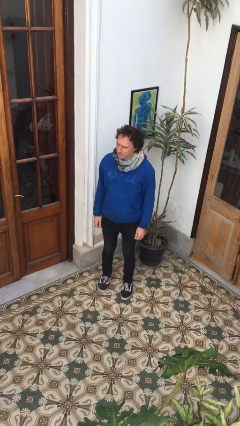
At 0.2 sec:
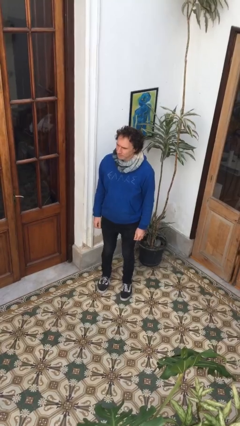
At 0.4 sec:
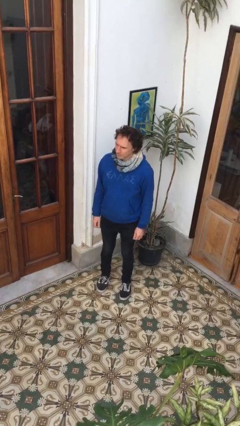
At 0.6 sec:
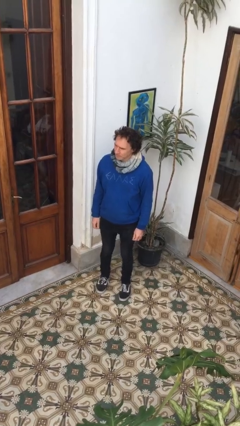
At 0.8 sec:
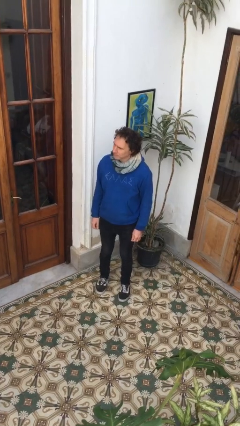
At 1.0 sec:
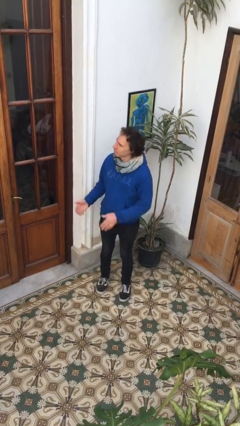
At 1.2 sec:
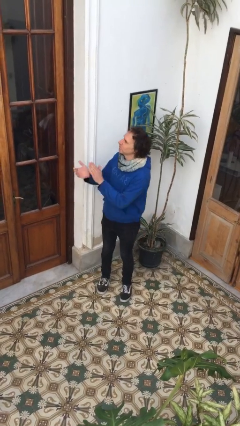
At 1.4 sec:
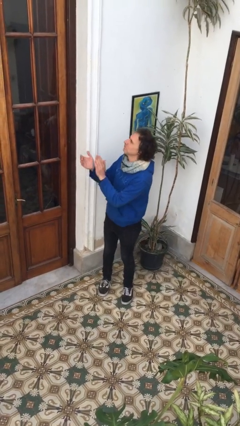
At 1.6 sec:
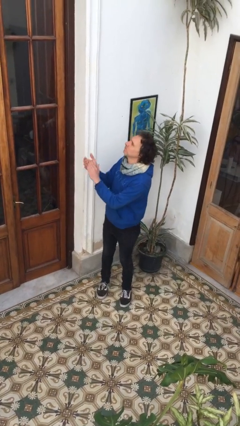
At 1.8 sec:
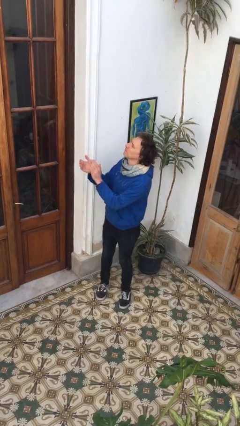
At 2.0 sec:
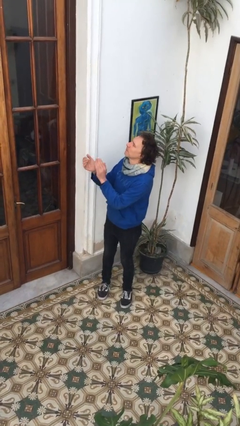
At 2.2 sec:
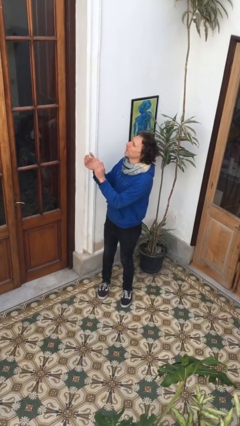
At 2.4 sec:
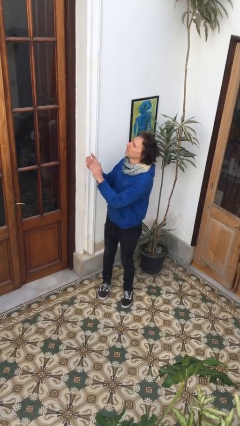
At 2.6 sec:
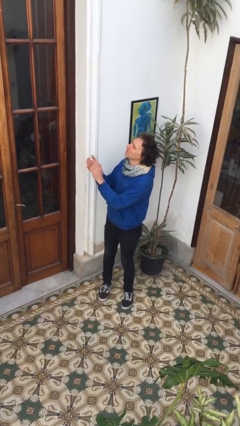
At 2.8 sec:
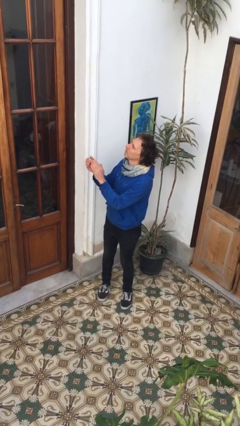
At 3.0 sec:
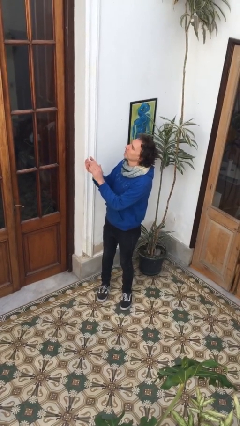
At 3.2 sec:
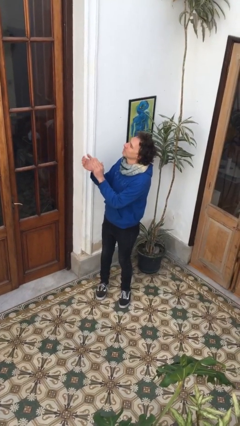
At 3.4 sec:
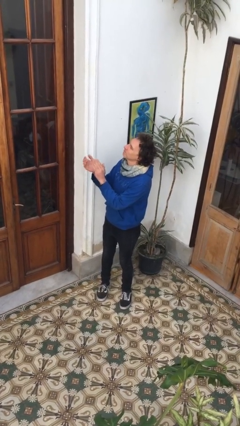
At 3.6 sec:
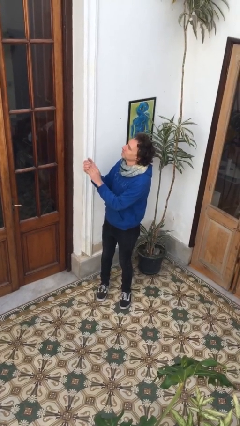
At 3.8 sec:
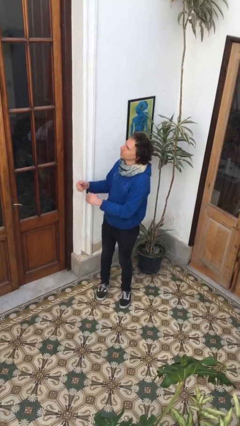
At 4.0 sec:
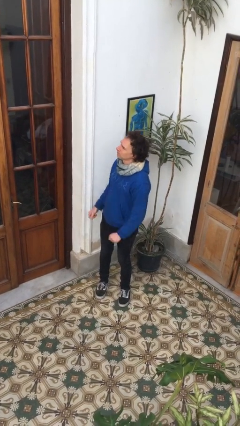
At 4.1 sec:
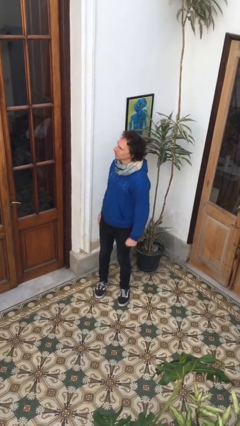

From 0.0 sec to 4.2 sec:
person claps hands

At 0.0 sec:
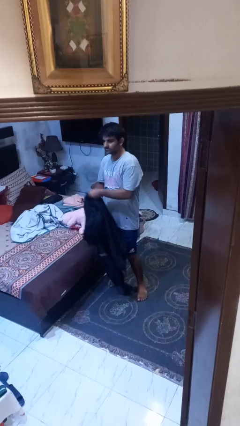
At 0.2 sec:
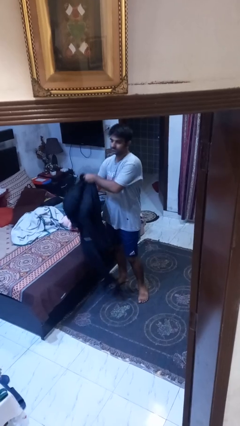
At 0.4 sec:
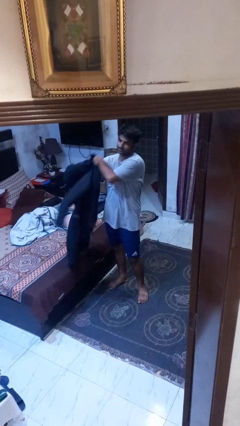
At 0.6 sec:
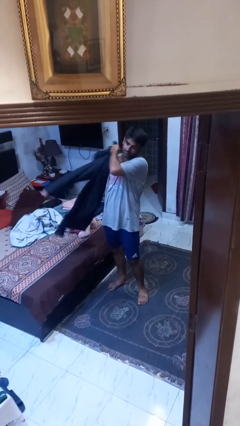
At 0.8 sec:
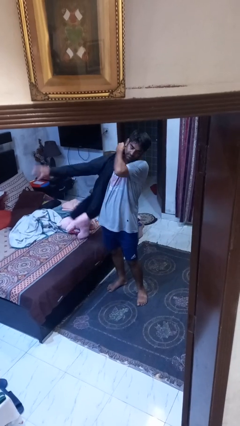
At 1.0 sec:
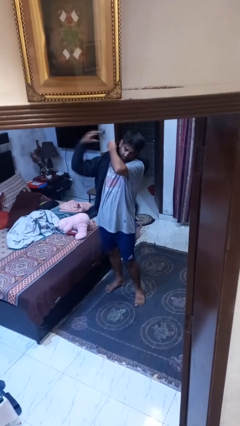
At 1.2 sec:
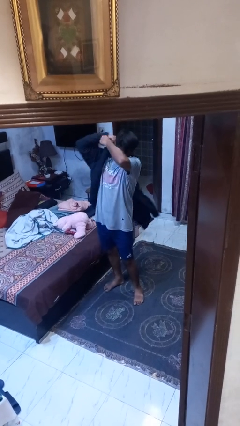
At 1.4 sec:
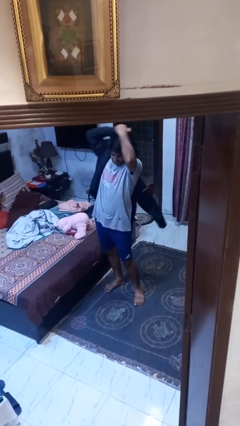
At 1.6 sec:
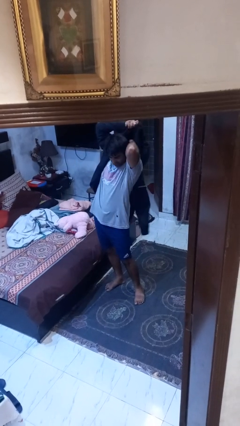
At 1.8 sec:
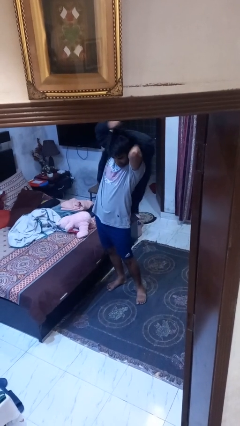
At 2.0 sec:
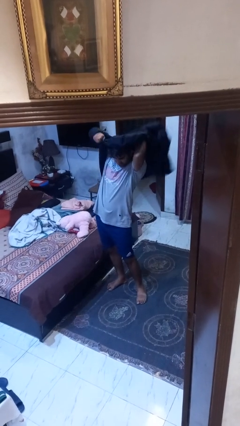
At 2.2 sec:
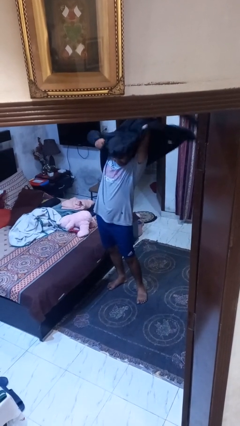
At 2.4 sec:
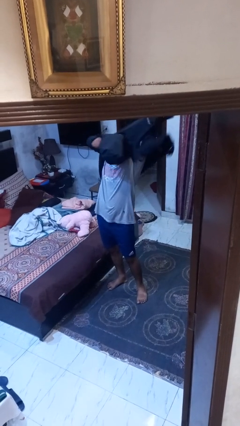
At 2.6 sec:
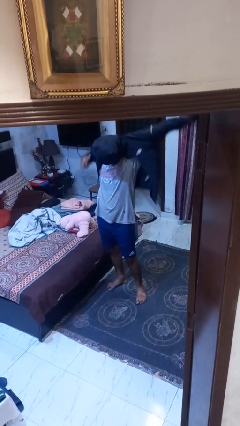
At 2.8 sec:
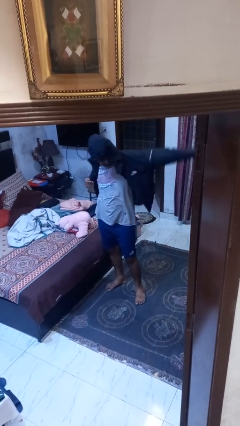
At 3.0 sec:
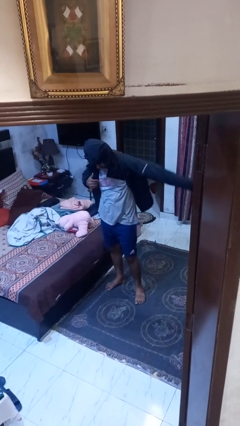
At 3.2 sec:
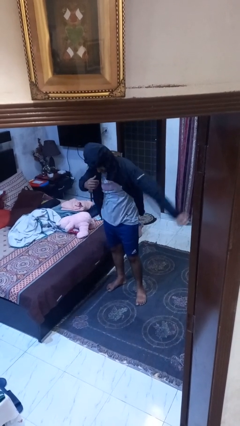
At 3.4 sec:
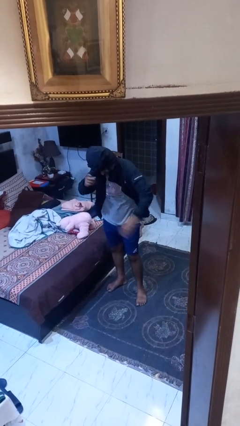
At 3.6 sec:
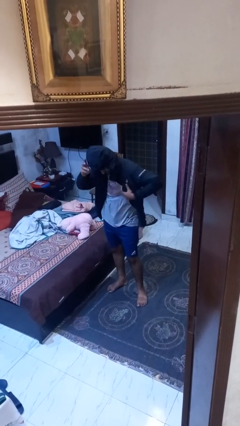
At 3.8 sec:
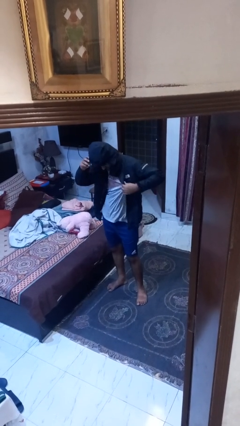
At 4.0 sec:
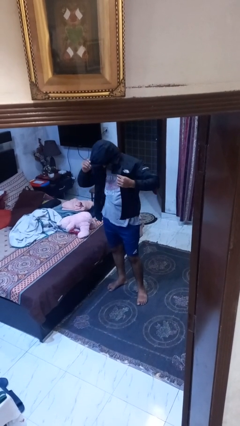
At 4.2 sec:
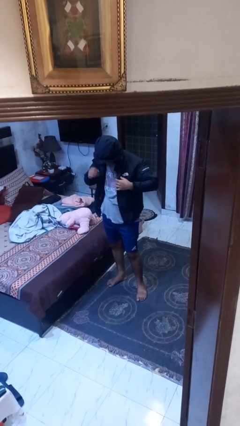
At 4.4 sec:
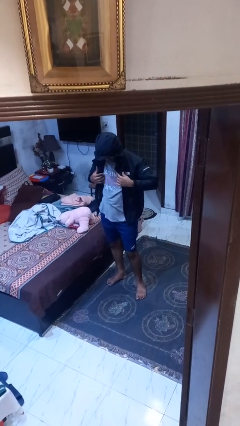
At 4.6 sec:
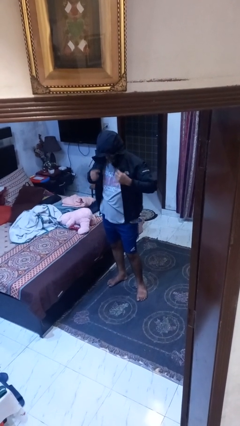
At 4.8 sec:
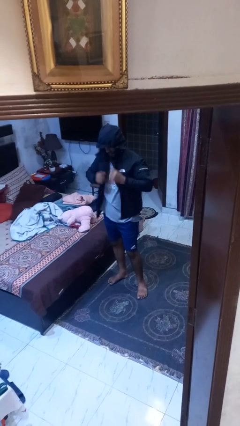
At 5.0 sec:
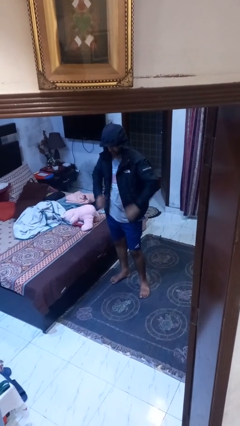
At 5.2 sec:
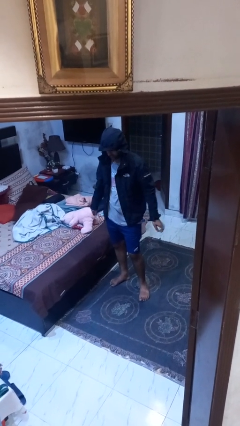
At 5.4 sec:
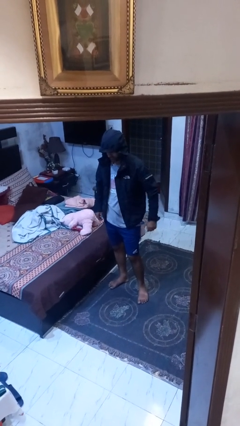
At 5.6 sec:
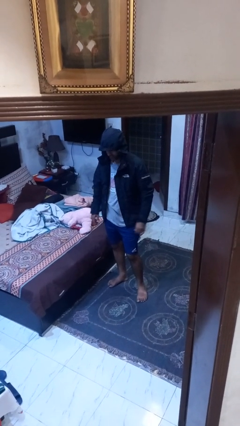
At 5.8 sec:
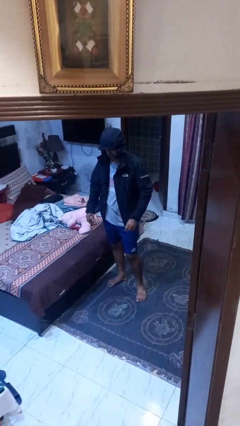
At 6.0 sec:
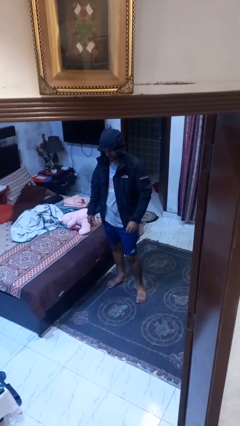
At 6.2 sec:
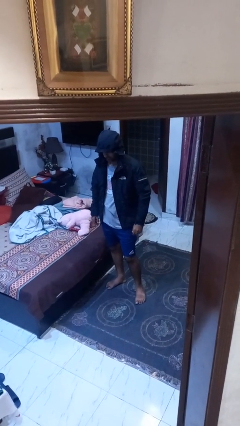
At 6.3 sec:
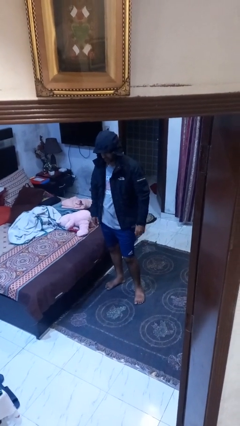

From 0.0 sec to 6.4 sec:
person puts on hoodie

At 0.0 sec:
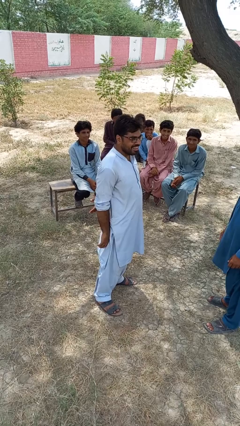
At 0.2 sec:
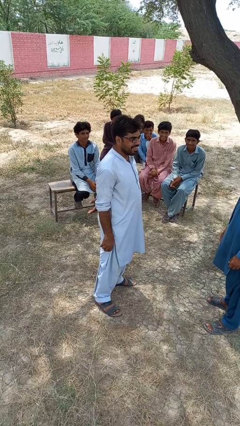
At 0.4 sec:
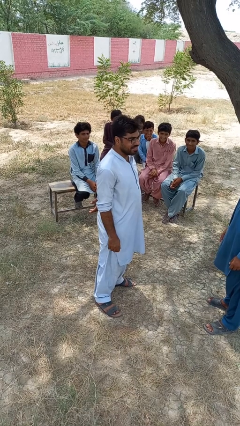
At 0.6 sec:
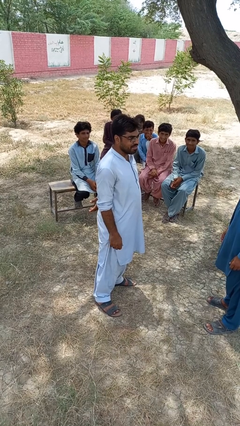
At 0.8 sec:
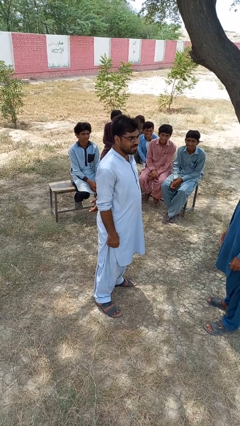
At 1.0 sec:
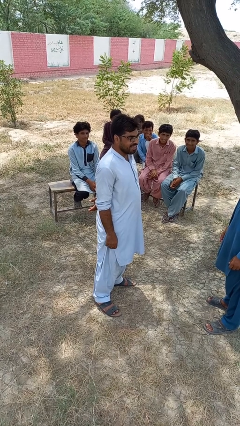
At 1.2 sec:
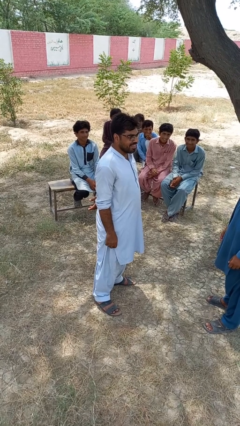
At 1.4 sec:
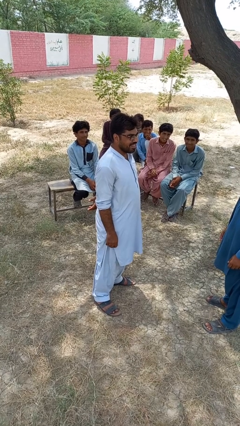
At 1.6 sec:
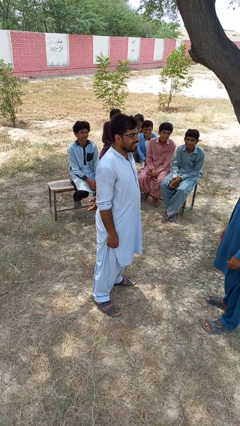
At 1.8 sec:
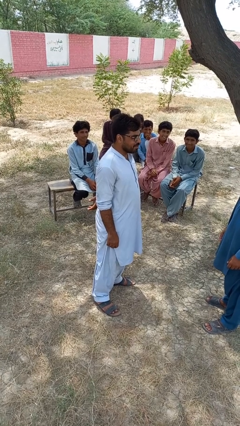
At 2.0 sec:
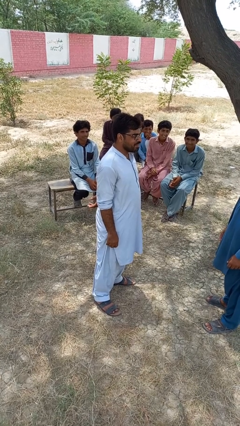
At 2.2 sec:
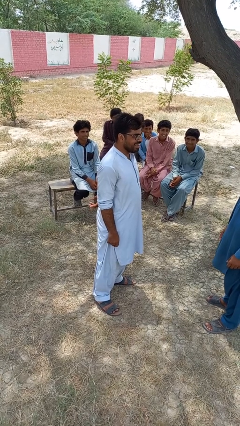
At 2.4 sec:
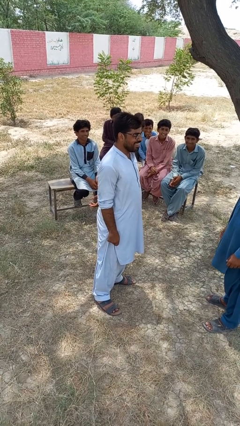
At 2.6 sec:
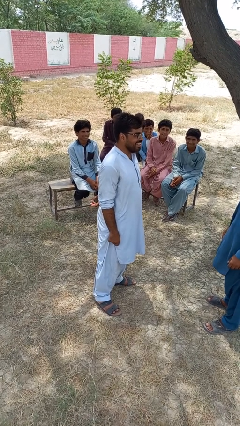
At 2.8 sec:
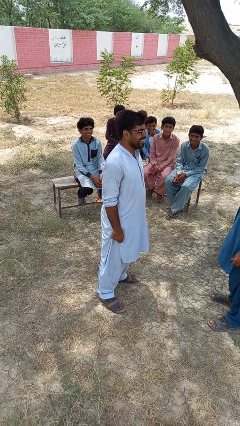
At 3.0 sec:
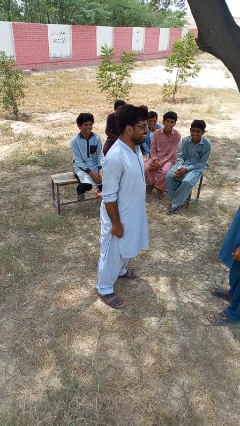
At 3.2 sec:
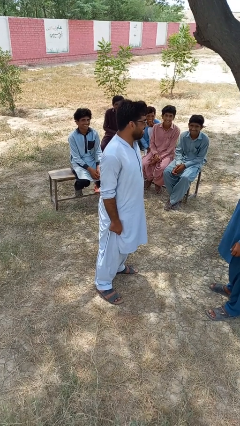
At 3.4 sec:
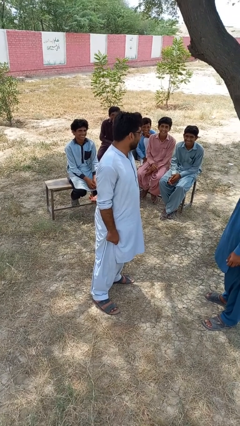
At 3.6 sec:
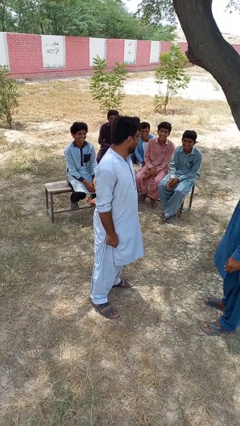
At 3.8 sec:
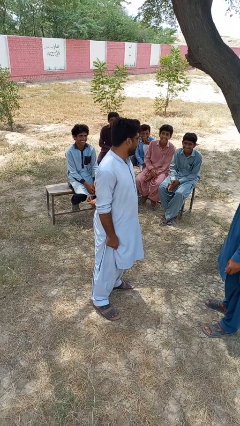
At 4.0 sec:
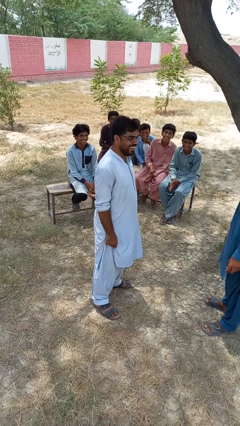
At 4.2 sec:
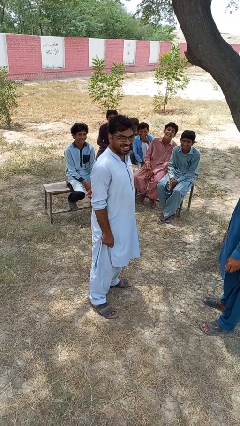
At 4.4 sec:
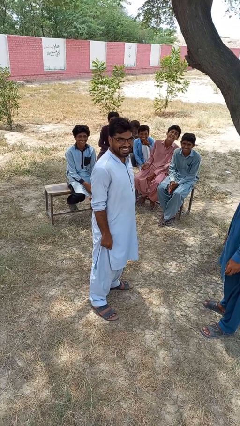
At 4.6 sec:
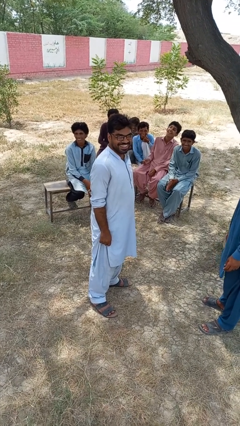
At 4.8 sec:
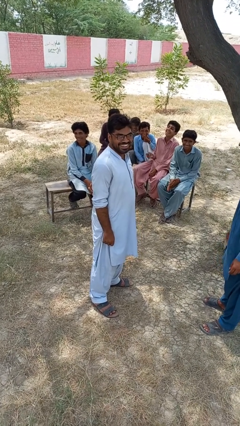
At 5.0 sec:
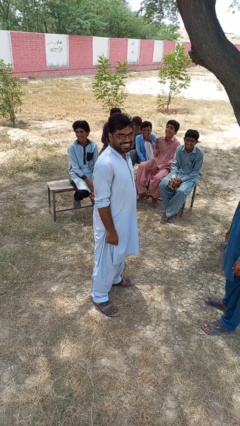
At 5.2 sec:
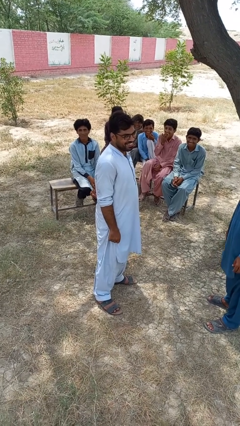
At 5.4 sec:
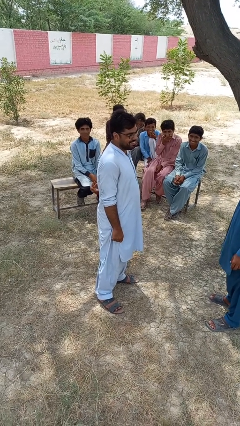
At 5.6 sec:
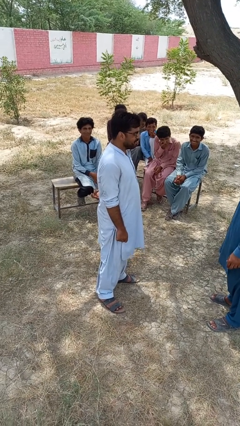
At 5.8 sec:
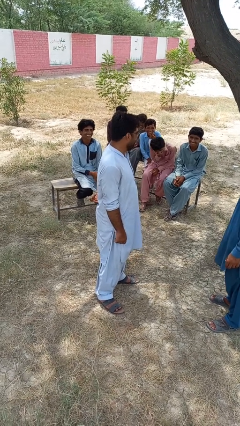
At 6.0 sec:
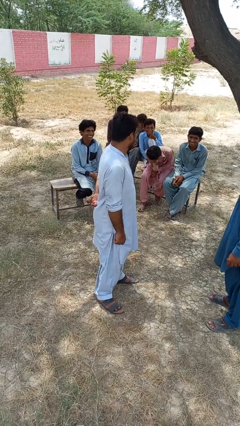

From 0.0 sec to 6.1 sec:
person laughs with person

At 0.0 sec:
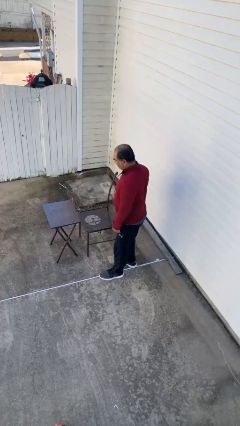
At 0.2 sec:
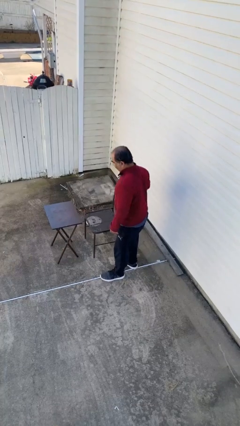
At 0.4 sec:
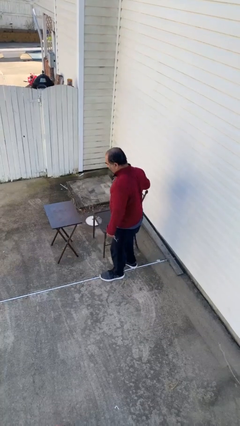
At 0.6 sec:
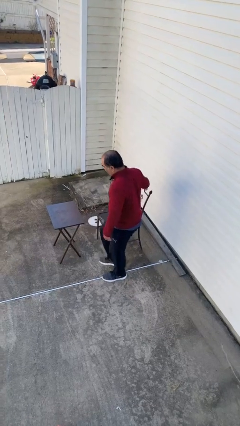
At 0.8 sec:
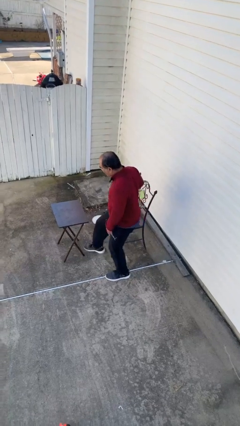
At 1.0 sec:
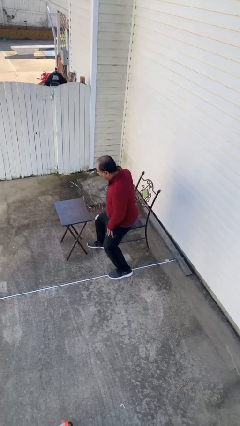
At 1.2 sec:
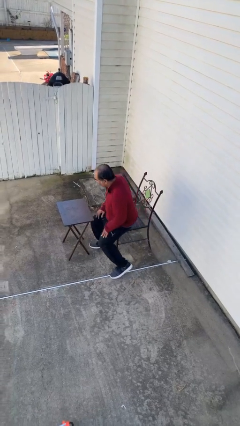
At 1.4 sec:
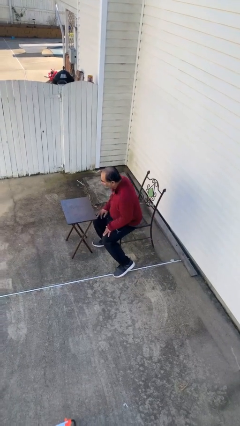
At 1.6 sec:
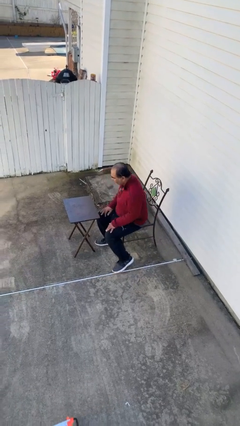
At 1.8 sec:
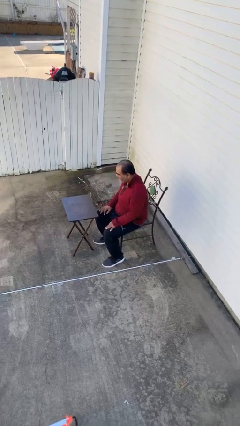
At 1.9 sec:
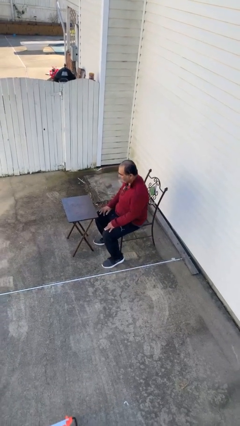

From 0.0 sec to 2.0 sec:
person sits down
